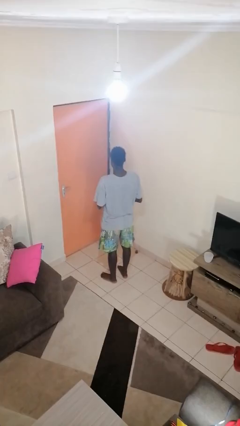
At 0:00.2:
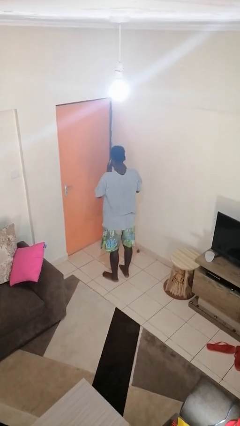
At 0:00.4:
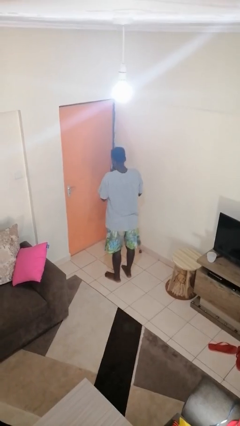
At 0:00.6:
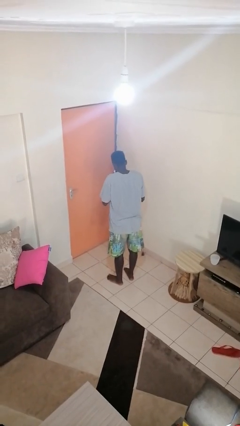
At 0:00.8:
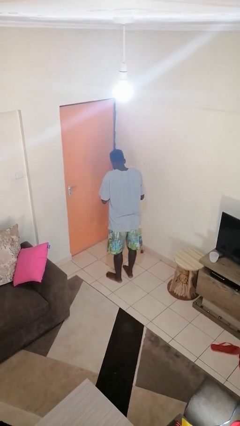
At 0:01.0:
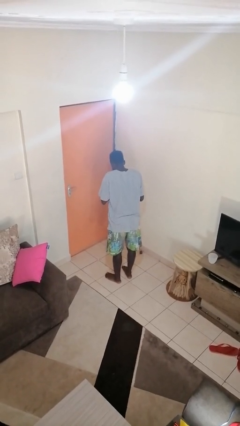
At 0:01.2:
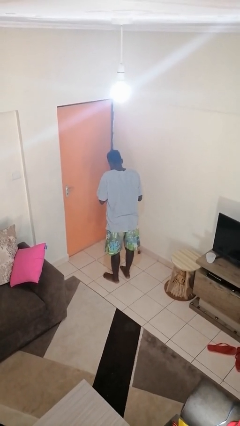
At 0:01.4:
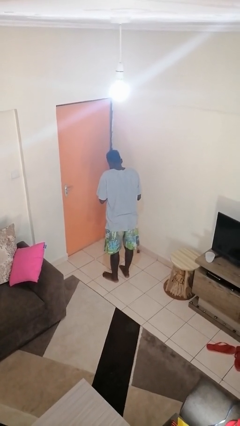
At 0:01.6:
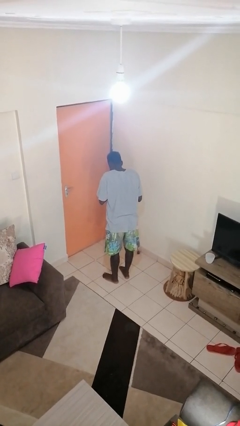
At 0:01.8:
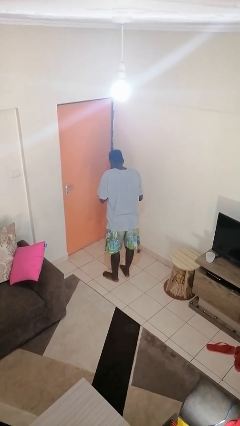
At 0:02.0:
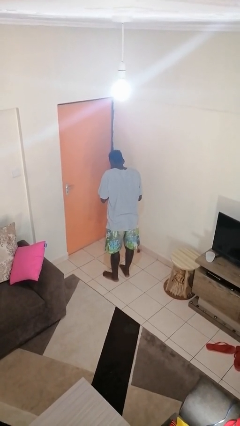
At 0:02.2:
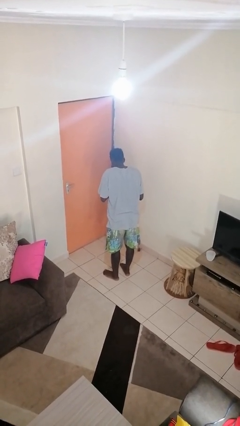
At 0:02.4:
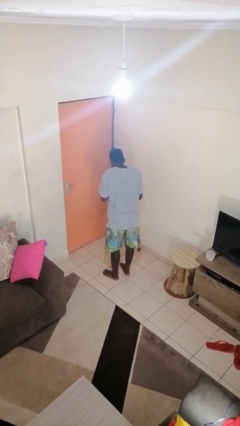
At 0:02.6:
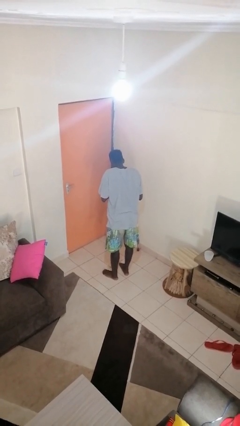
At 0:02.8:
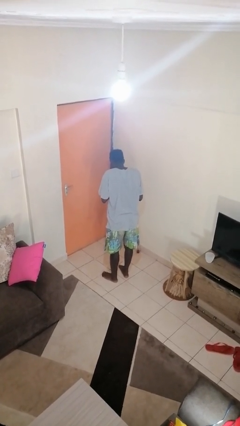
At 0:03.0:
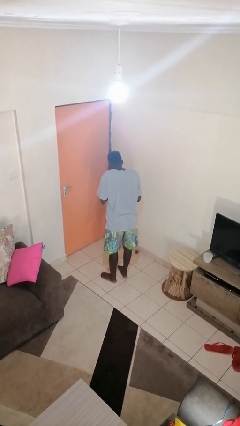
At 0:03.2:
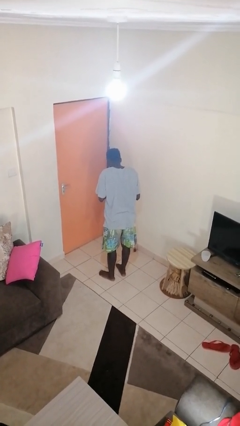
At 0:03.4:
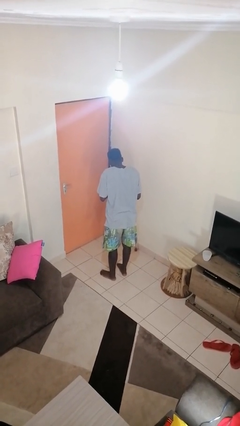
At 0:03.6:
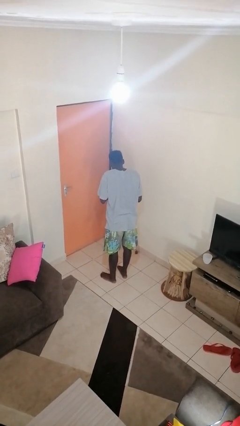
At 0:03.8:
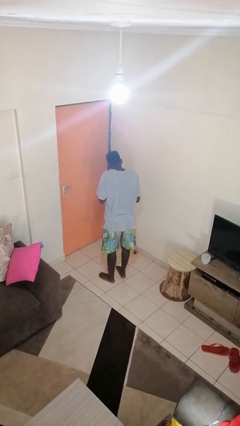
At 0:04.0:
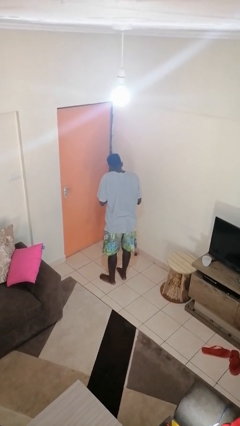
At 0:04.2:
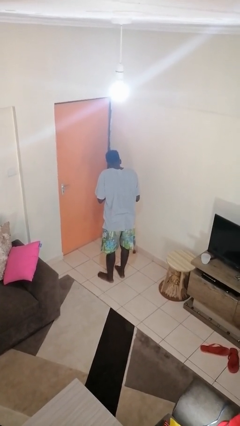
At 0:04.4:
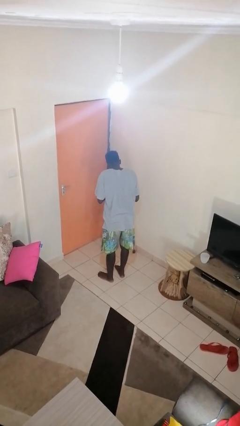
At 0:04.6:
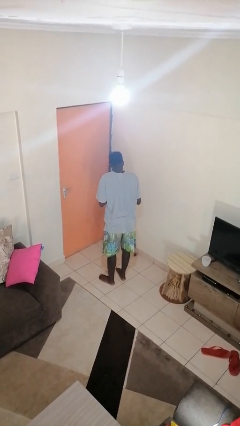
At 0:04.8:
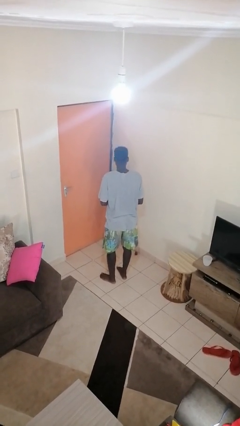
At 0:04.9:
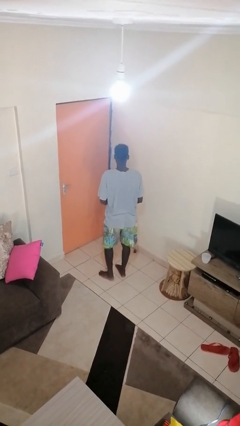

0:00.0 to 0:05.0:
person blows nose

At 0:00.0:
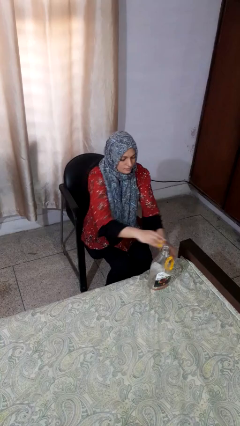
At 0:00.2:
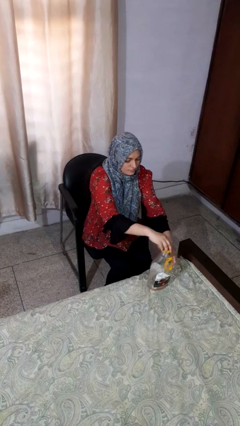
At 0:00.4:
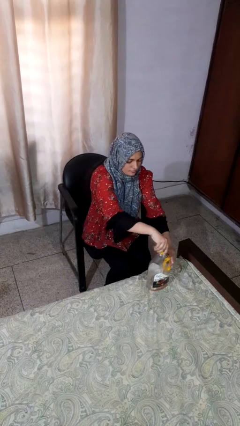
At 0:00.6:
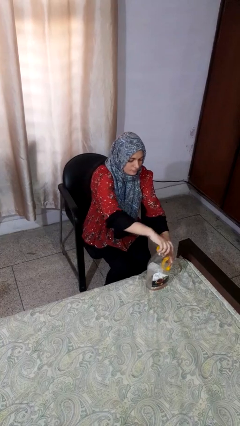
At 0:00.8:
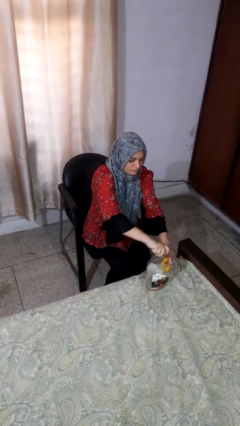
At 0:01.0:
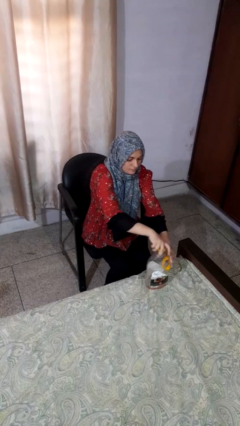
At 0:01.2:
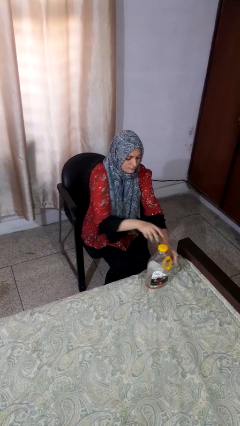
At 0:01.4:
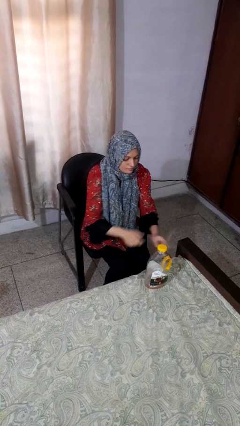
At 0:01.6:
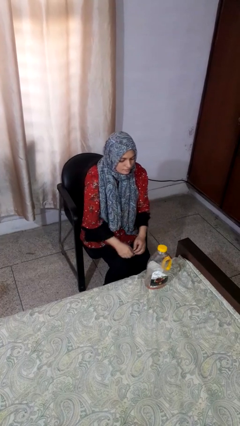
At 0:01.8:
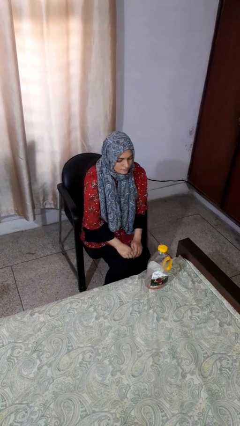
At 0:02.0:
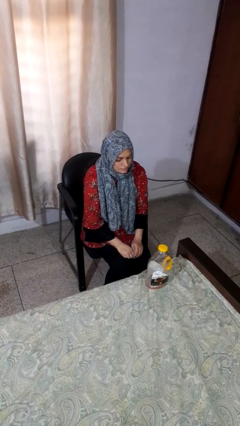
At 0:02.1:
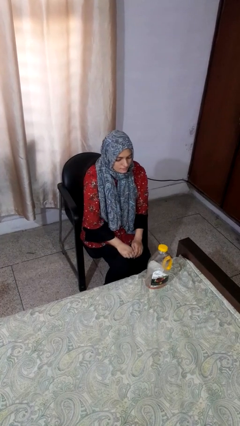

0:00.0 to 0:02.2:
person screws lid to bottle

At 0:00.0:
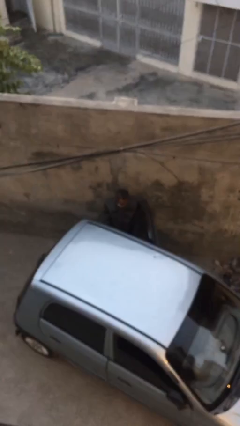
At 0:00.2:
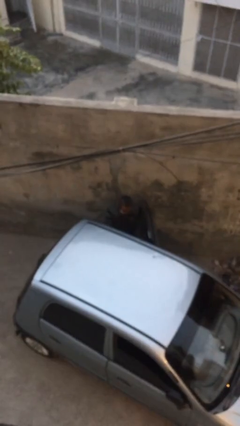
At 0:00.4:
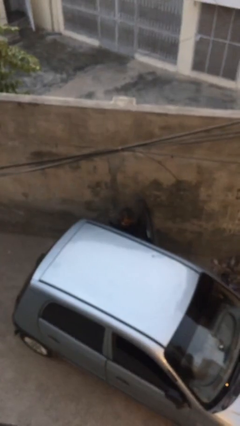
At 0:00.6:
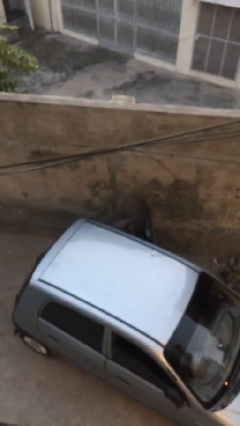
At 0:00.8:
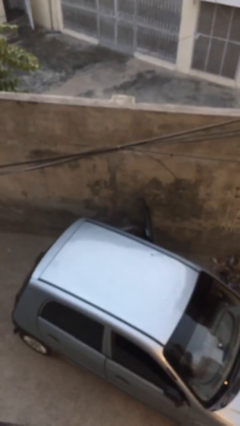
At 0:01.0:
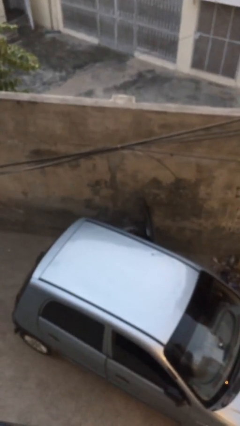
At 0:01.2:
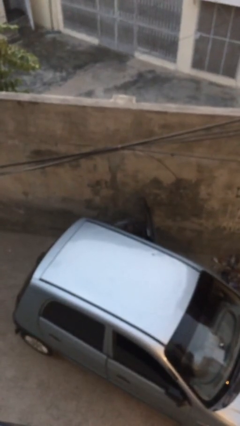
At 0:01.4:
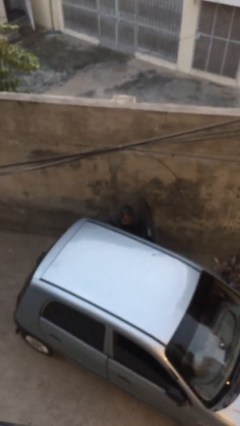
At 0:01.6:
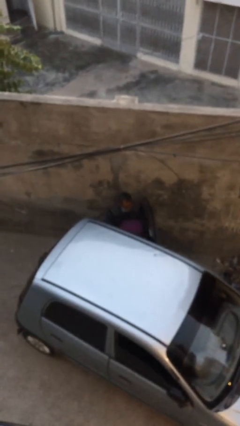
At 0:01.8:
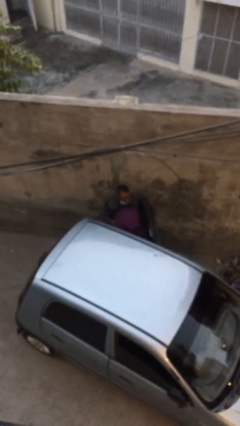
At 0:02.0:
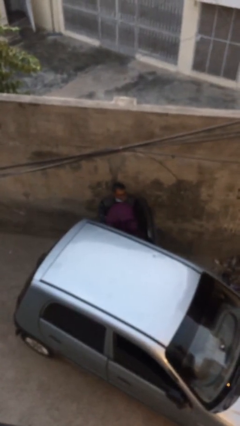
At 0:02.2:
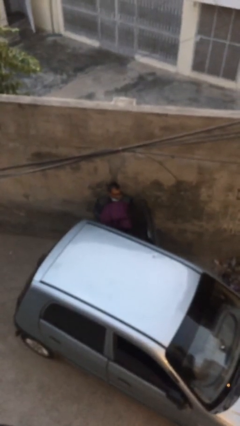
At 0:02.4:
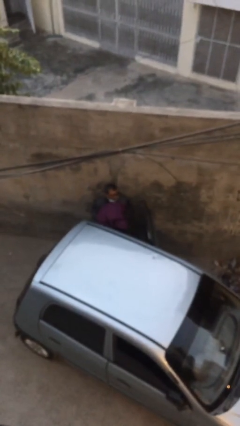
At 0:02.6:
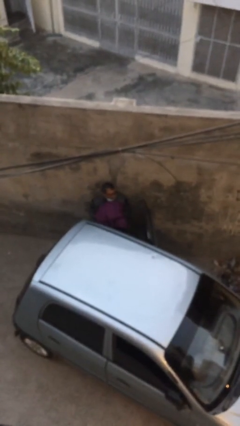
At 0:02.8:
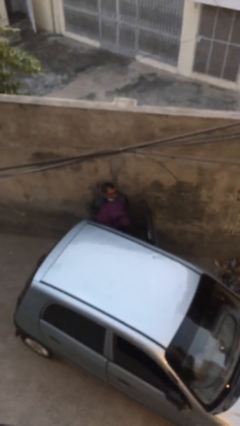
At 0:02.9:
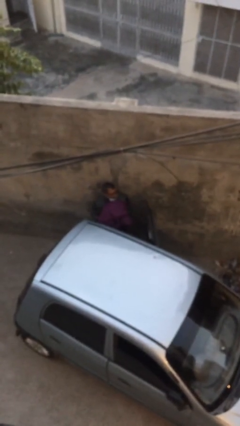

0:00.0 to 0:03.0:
person unloads car

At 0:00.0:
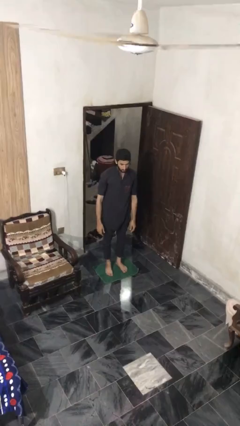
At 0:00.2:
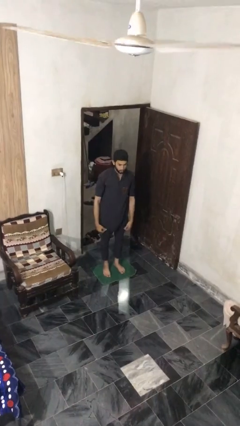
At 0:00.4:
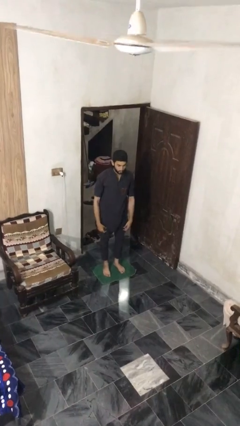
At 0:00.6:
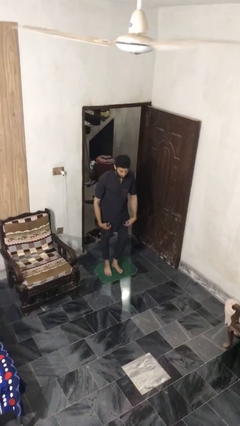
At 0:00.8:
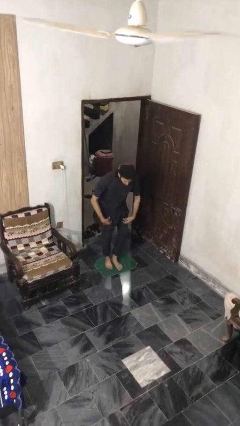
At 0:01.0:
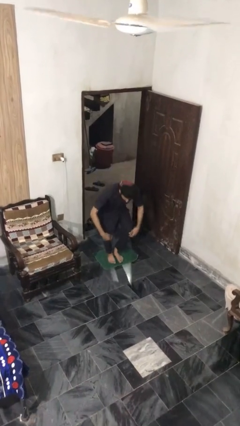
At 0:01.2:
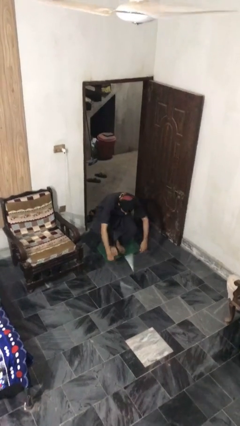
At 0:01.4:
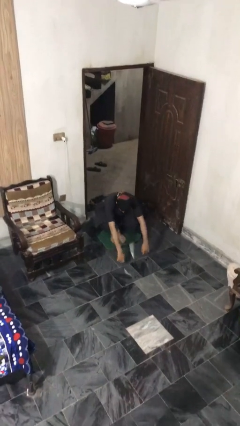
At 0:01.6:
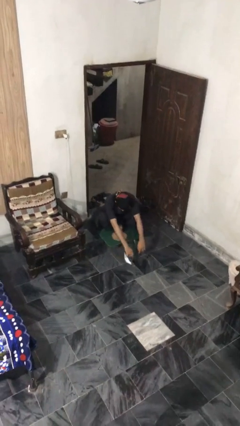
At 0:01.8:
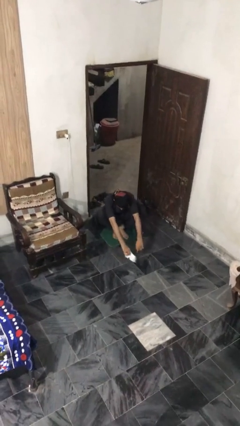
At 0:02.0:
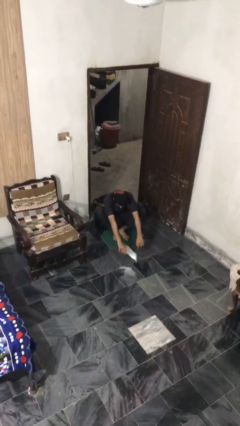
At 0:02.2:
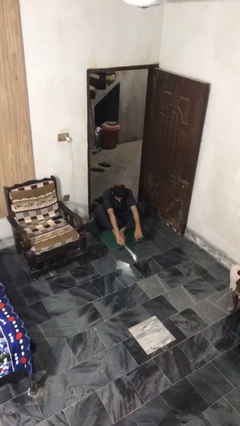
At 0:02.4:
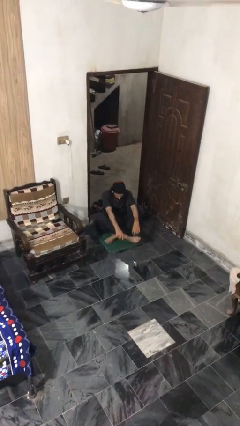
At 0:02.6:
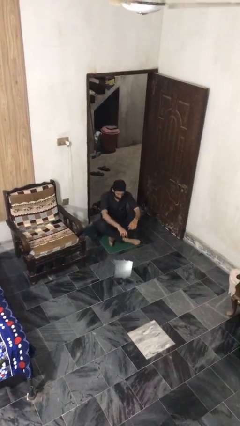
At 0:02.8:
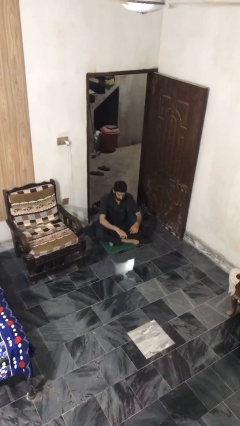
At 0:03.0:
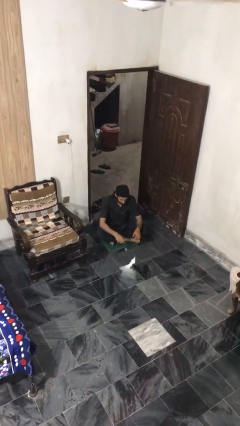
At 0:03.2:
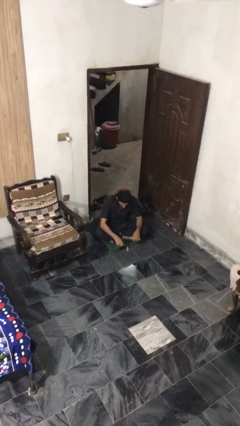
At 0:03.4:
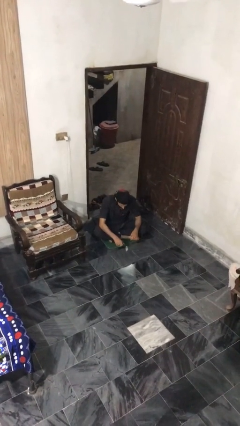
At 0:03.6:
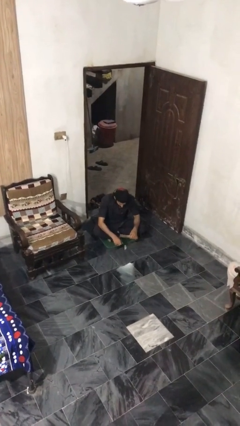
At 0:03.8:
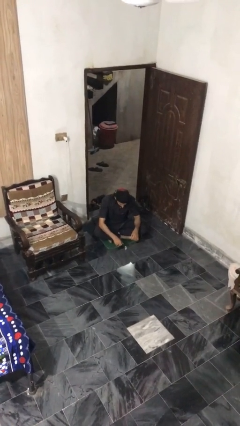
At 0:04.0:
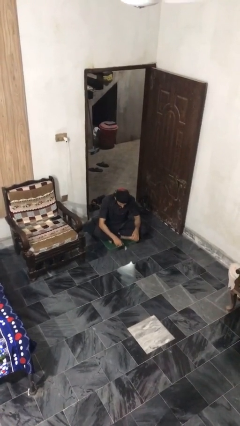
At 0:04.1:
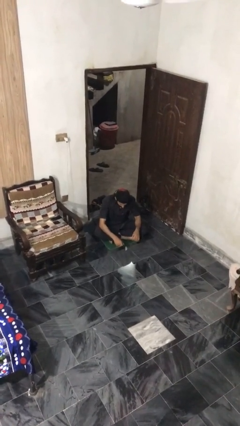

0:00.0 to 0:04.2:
person sits crisscross

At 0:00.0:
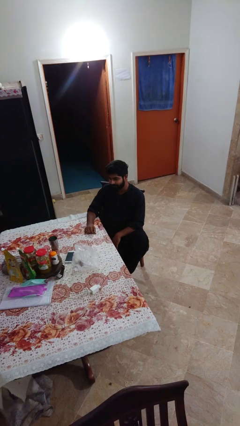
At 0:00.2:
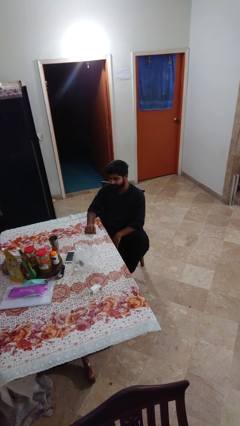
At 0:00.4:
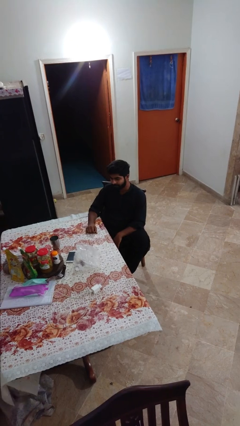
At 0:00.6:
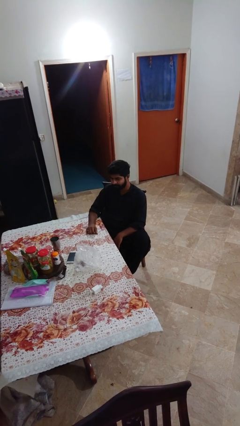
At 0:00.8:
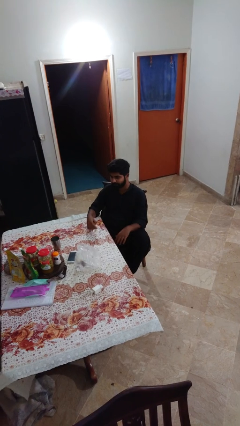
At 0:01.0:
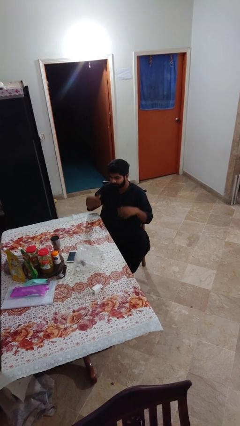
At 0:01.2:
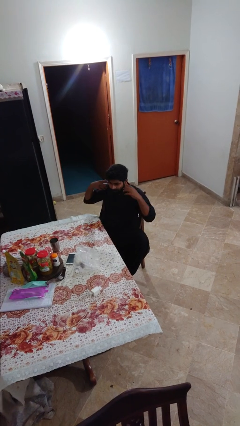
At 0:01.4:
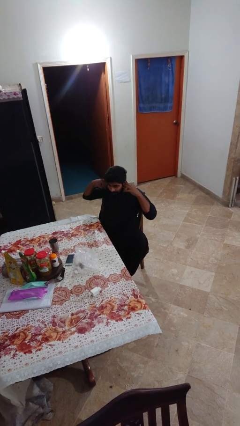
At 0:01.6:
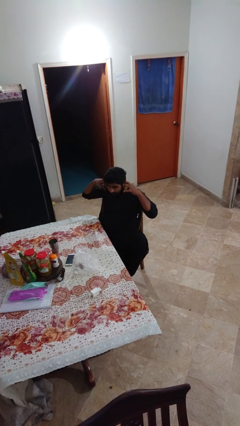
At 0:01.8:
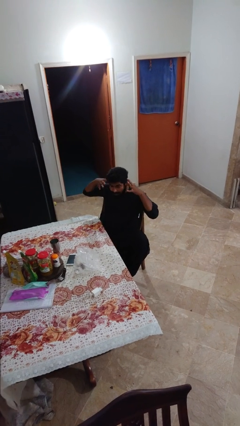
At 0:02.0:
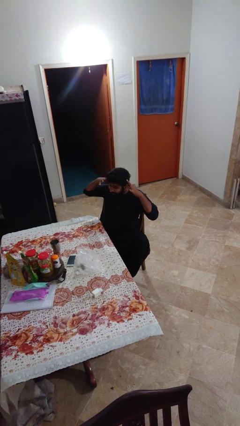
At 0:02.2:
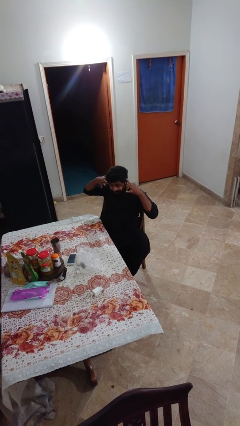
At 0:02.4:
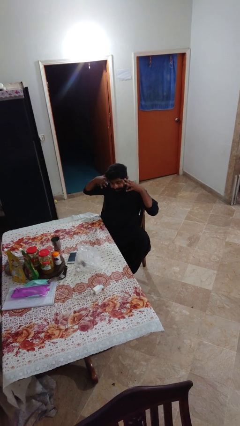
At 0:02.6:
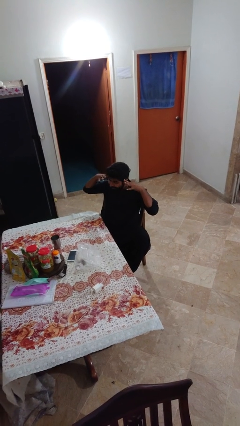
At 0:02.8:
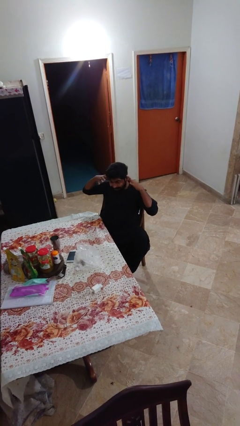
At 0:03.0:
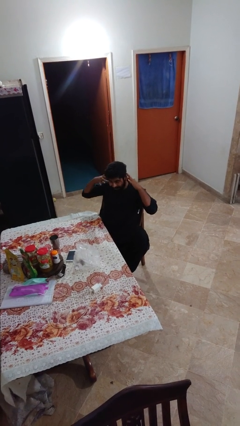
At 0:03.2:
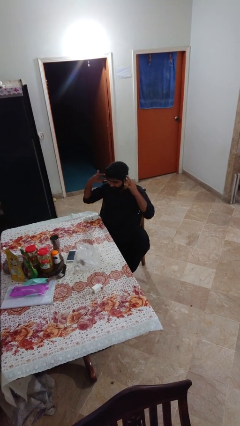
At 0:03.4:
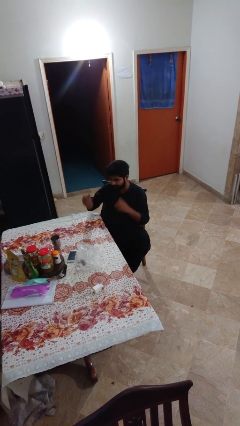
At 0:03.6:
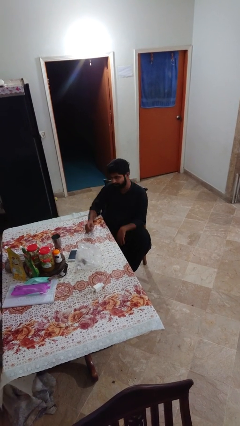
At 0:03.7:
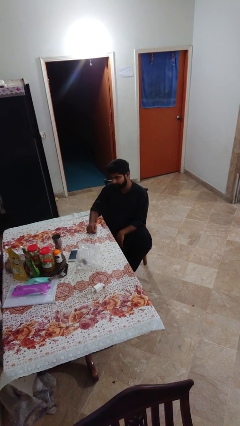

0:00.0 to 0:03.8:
person puts fingers in ear
